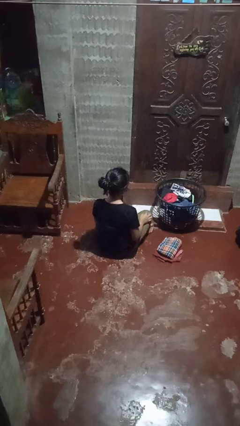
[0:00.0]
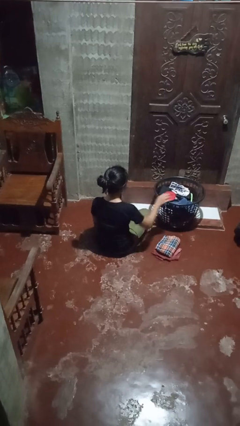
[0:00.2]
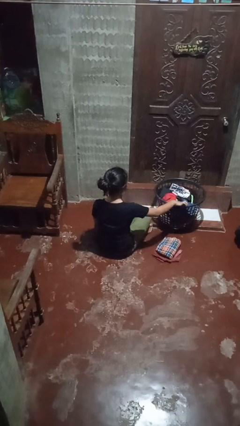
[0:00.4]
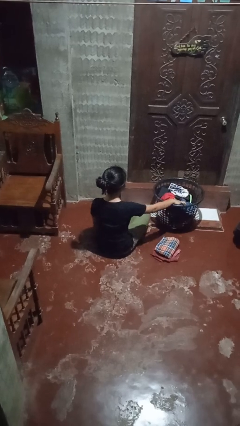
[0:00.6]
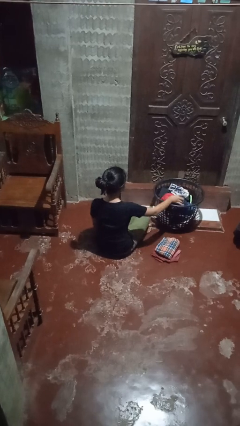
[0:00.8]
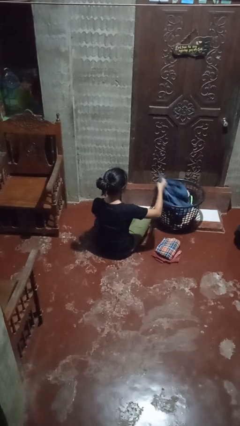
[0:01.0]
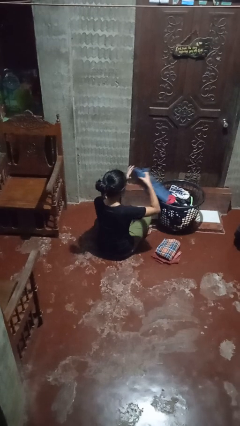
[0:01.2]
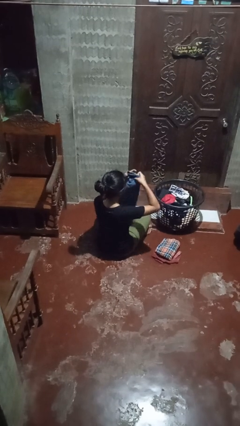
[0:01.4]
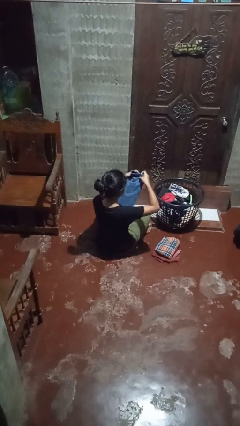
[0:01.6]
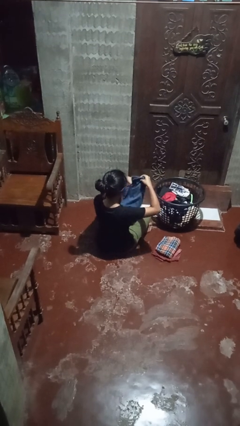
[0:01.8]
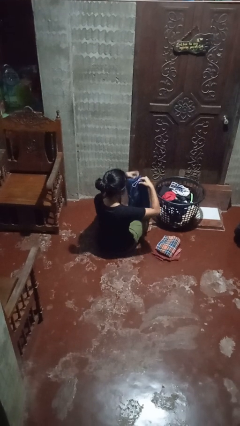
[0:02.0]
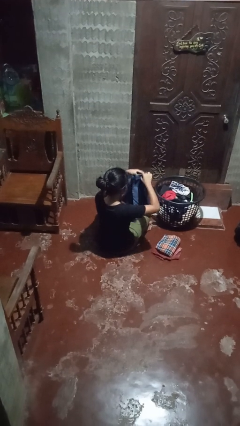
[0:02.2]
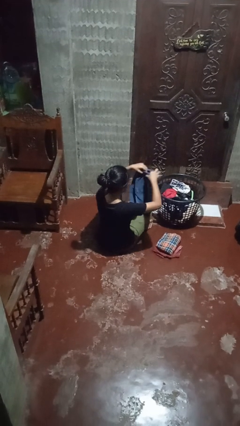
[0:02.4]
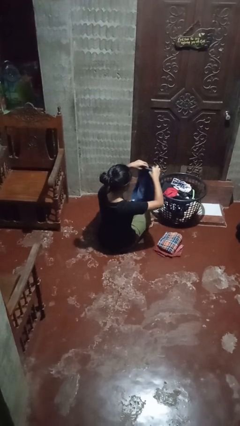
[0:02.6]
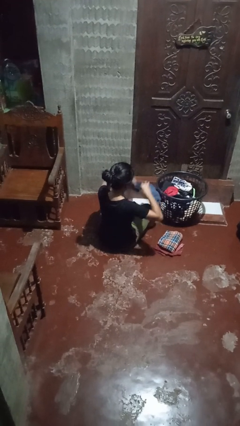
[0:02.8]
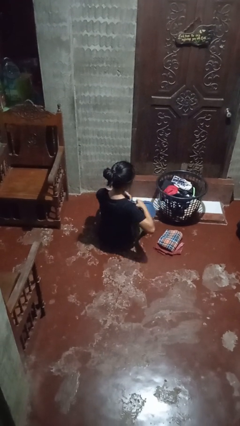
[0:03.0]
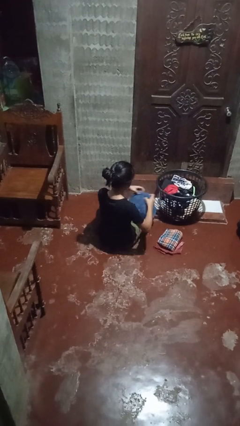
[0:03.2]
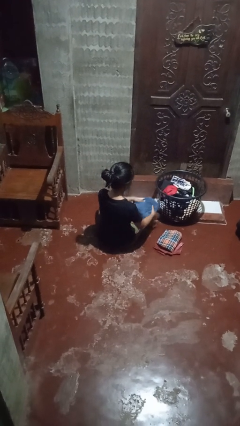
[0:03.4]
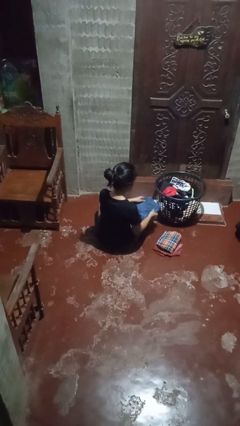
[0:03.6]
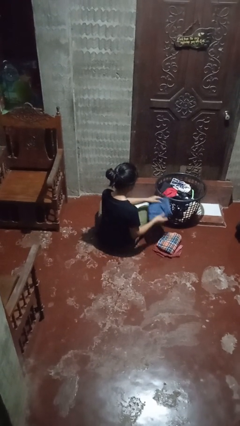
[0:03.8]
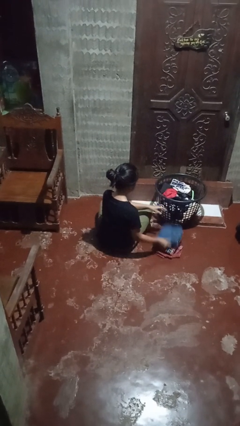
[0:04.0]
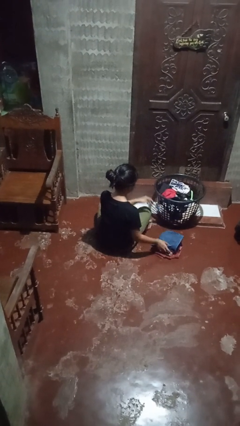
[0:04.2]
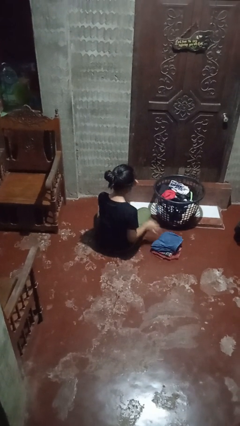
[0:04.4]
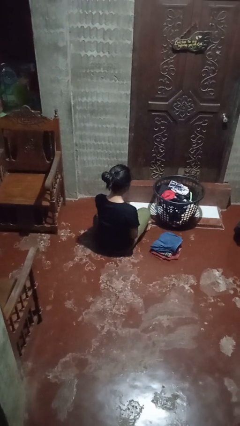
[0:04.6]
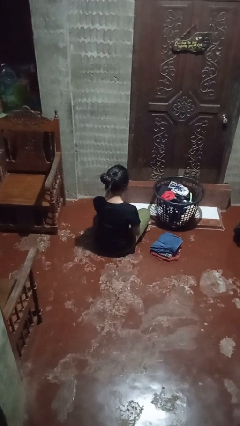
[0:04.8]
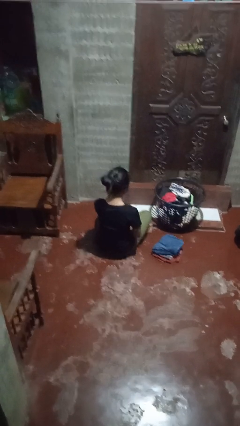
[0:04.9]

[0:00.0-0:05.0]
person folds pants

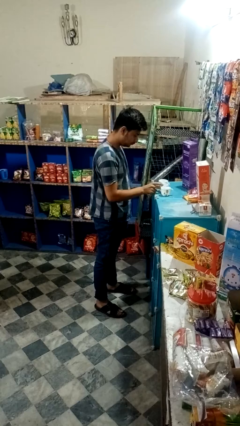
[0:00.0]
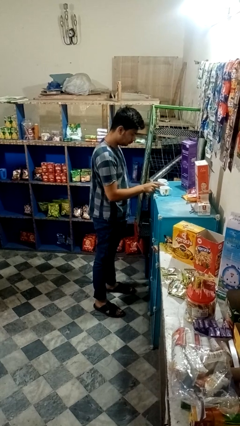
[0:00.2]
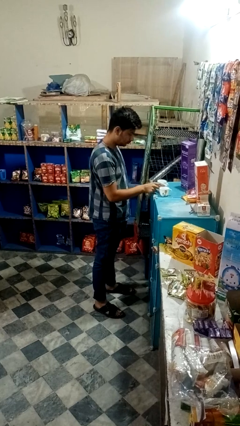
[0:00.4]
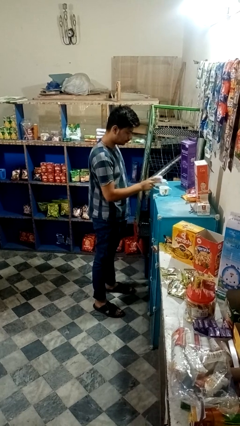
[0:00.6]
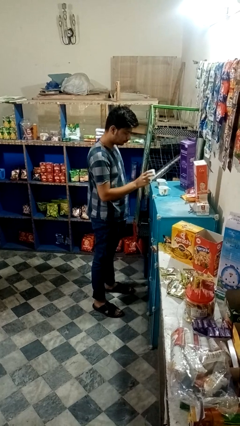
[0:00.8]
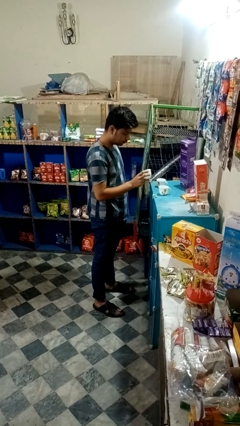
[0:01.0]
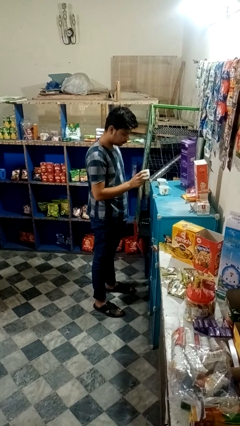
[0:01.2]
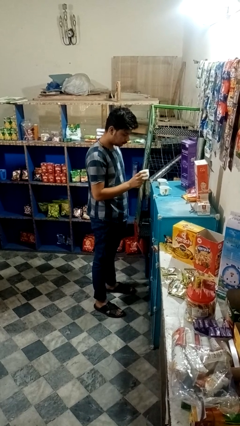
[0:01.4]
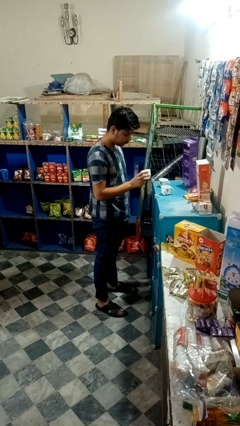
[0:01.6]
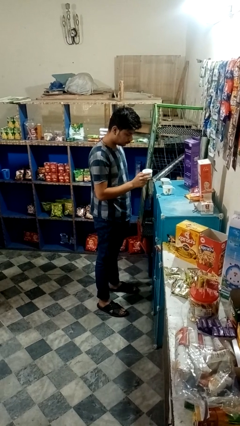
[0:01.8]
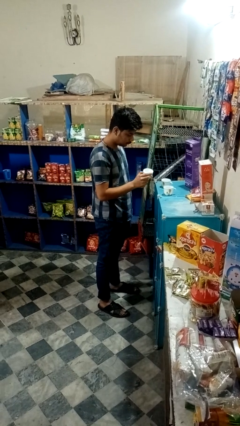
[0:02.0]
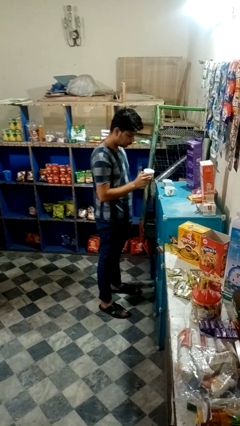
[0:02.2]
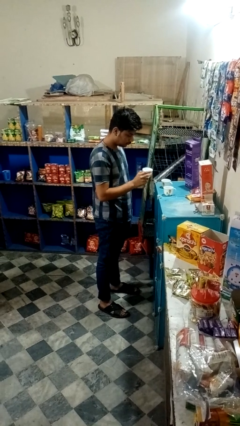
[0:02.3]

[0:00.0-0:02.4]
person picks up object from table

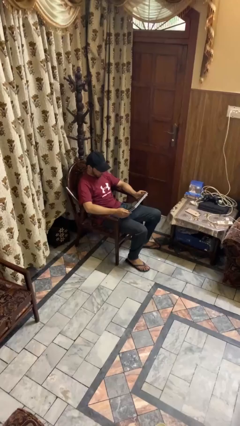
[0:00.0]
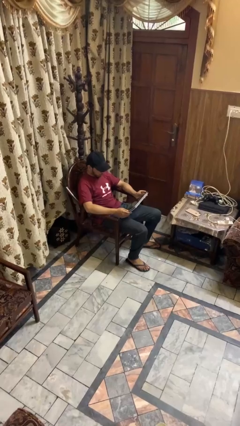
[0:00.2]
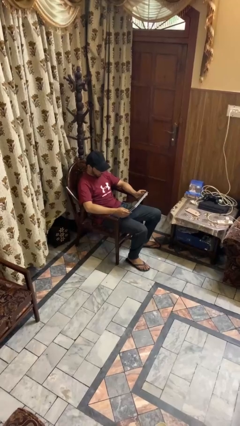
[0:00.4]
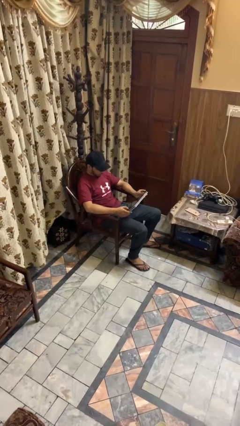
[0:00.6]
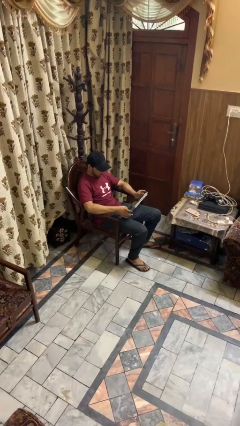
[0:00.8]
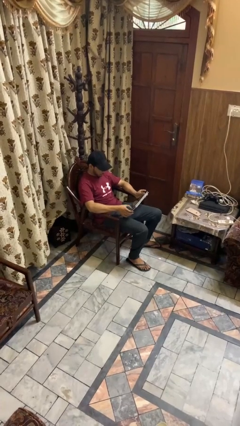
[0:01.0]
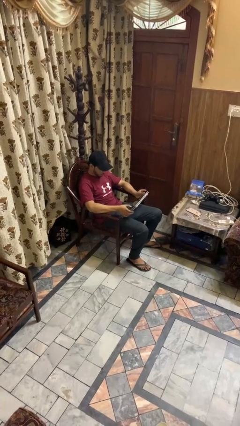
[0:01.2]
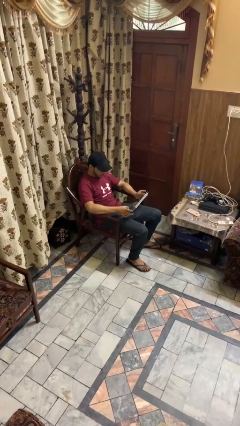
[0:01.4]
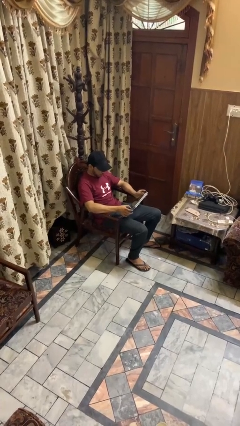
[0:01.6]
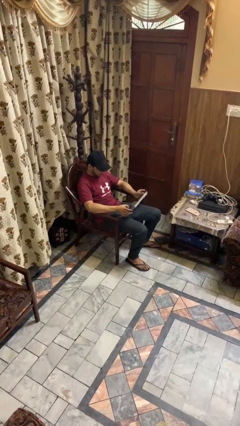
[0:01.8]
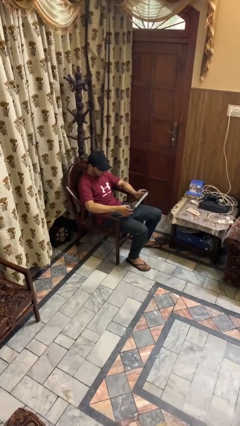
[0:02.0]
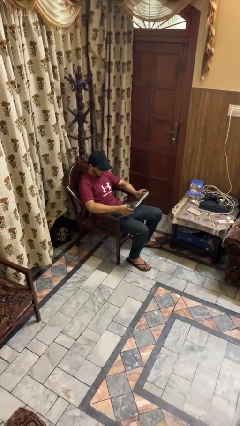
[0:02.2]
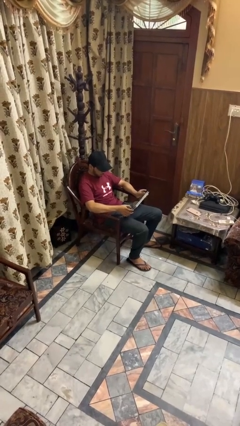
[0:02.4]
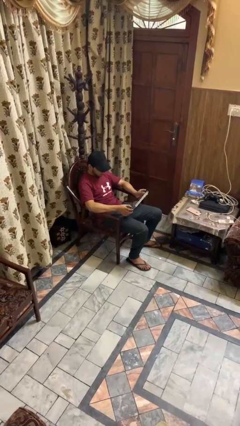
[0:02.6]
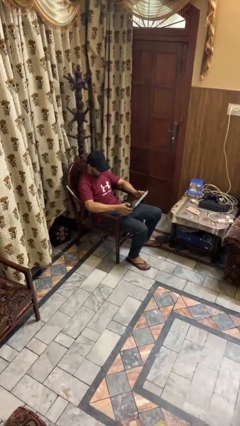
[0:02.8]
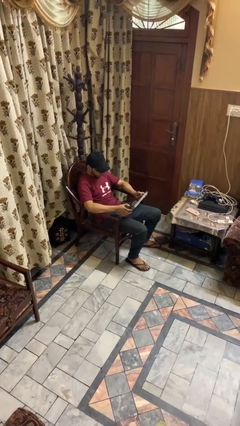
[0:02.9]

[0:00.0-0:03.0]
person interacts with tablet

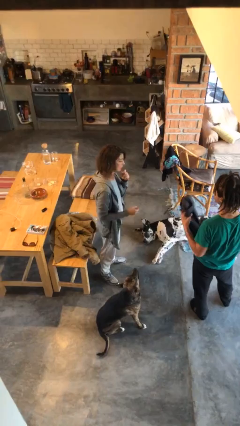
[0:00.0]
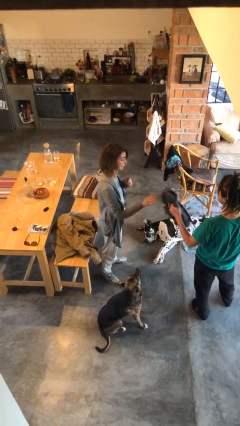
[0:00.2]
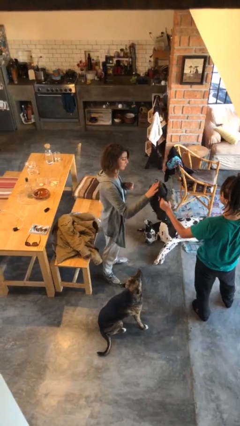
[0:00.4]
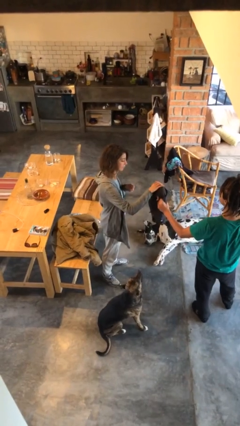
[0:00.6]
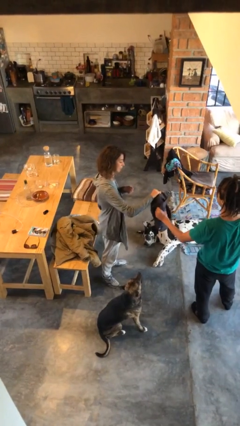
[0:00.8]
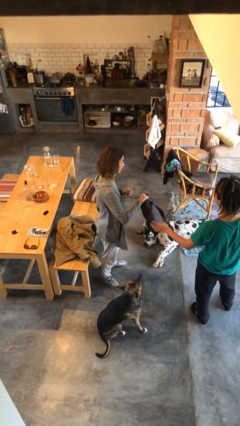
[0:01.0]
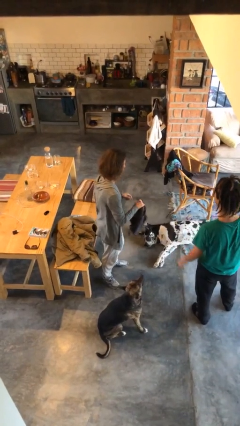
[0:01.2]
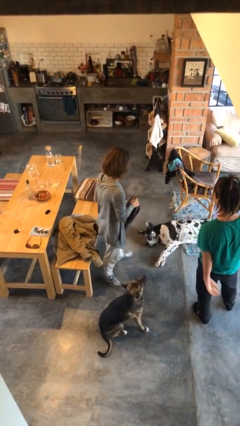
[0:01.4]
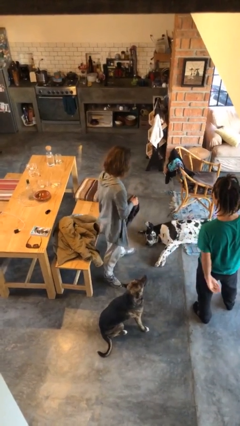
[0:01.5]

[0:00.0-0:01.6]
person transfers object to person

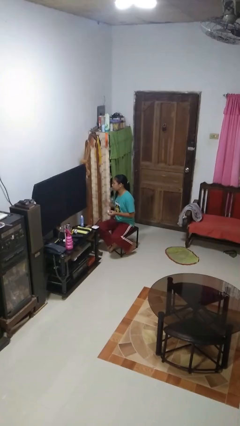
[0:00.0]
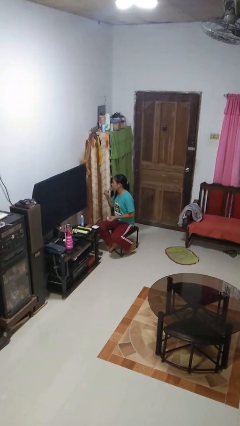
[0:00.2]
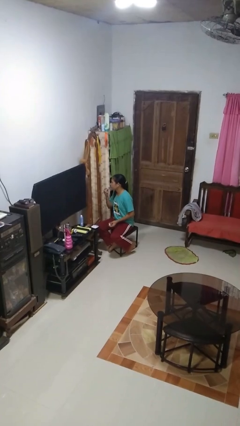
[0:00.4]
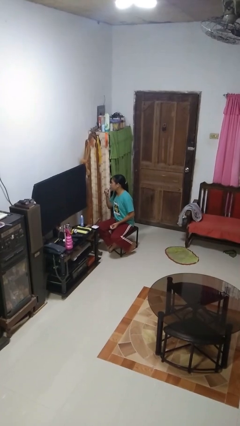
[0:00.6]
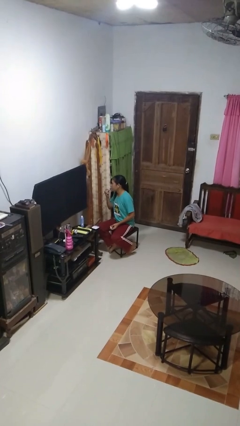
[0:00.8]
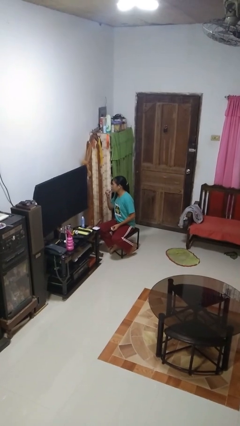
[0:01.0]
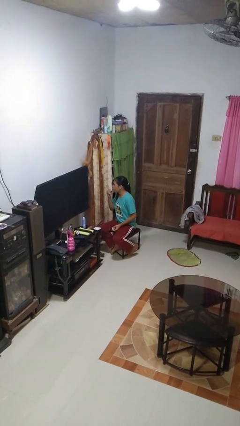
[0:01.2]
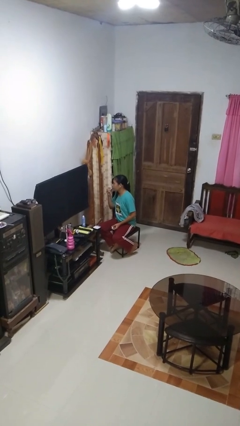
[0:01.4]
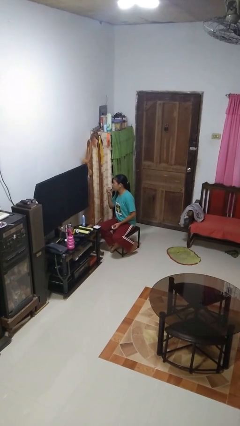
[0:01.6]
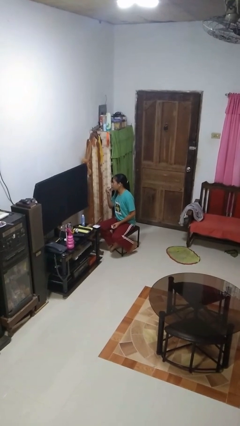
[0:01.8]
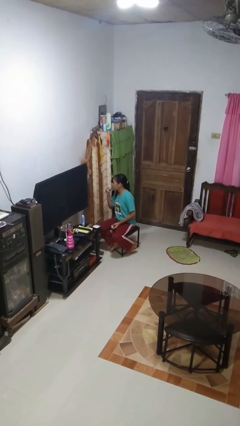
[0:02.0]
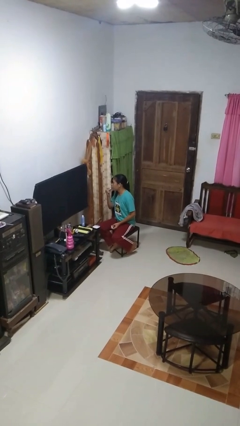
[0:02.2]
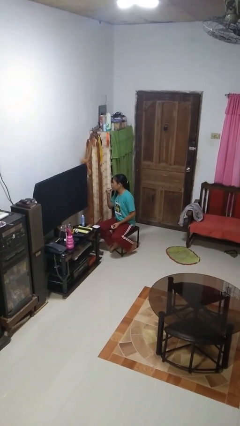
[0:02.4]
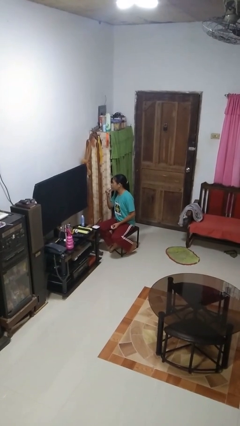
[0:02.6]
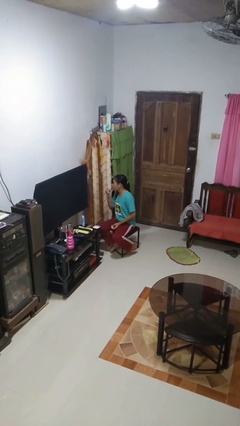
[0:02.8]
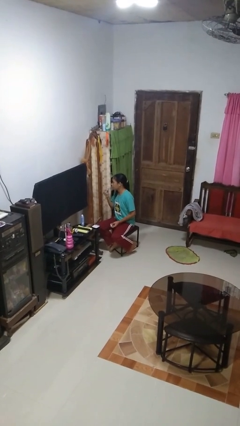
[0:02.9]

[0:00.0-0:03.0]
person applies lip makeup

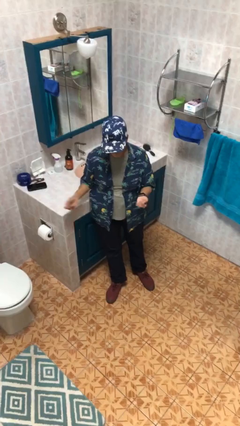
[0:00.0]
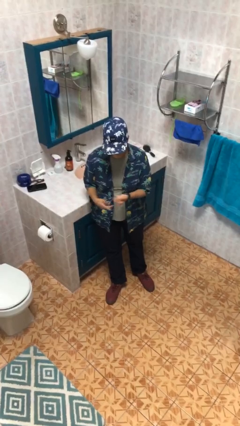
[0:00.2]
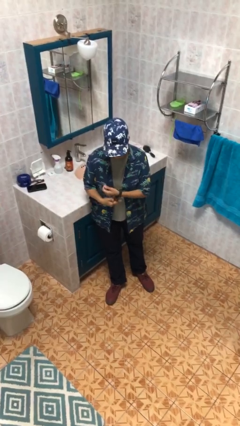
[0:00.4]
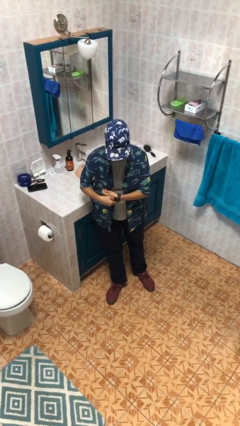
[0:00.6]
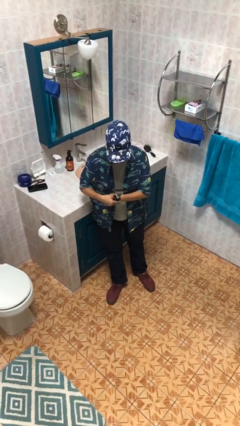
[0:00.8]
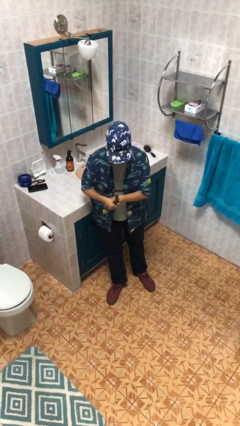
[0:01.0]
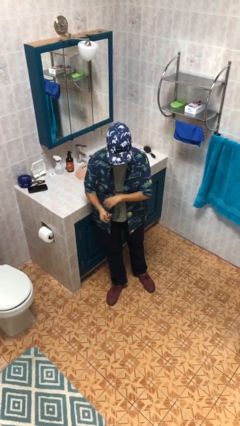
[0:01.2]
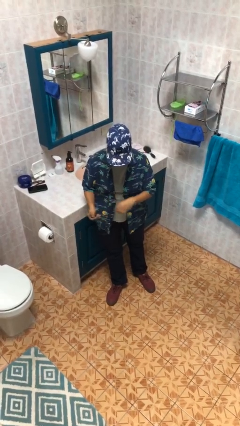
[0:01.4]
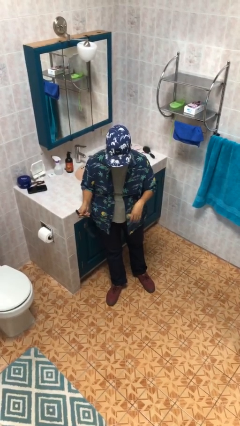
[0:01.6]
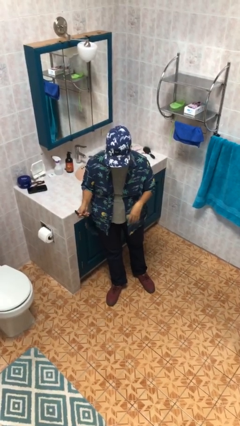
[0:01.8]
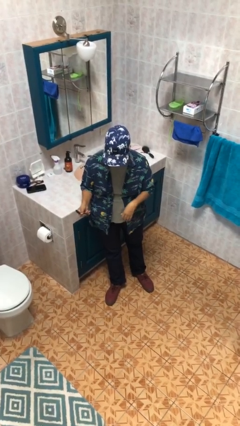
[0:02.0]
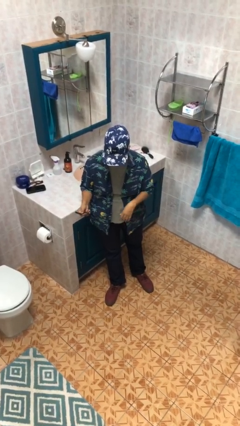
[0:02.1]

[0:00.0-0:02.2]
person takes off wristwatch
